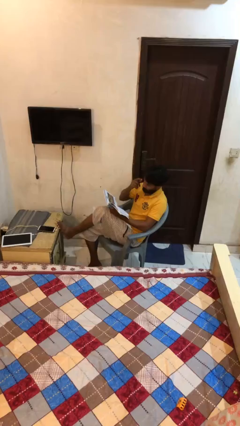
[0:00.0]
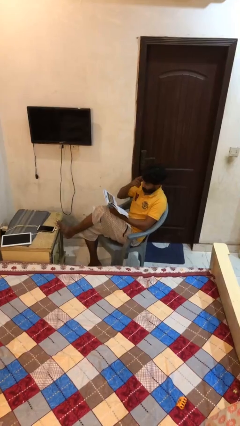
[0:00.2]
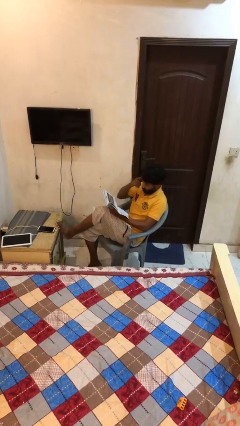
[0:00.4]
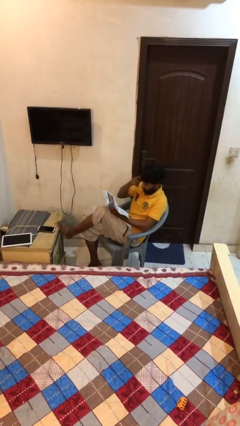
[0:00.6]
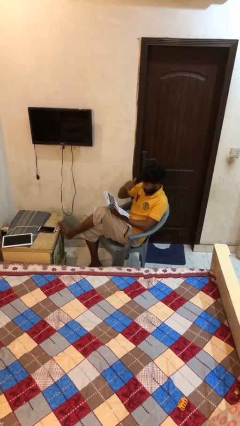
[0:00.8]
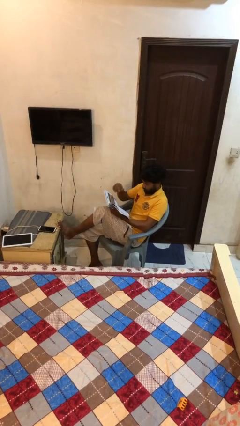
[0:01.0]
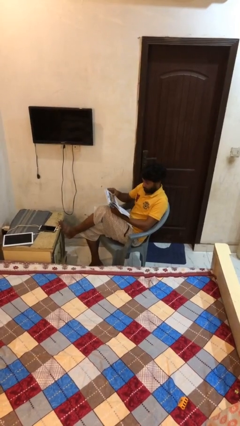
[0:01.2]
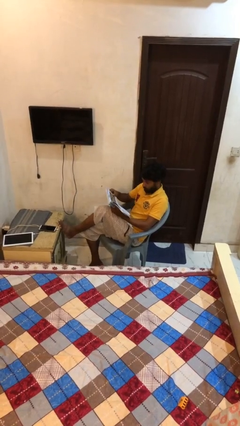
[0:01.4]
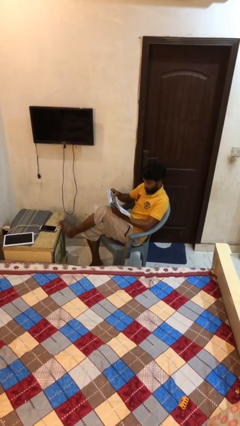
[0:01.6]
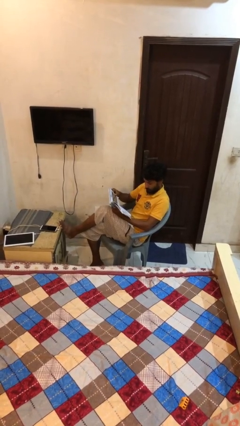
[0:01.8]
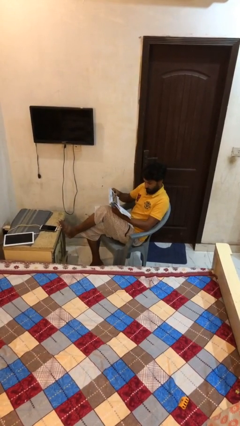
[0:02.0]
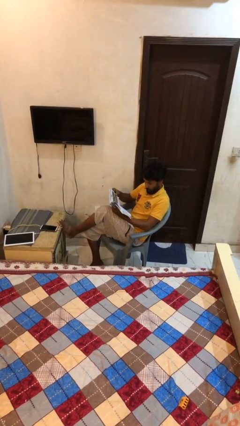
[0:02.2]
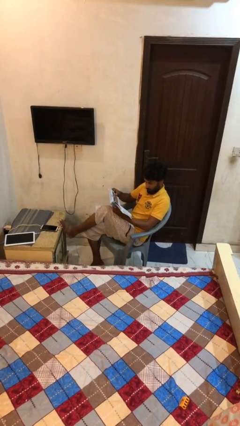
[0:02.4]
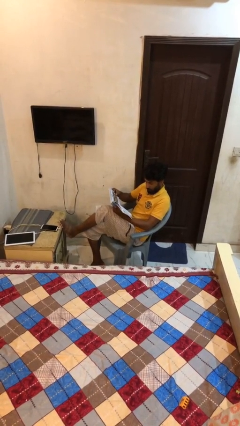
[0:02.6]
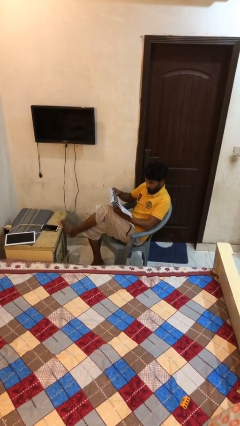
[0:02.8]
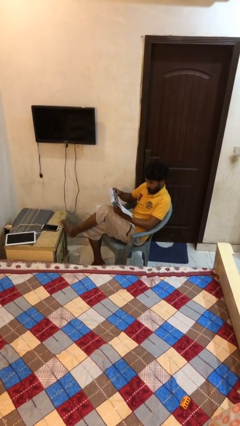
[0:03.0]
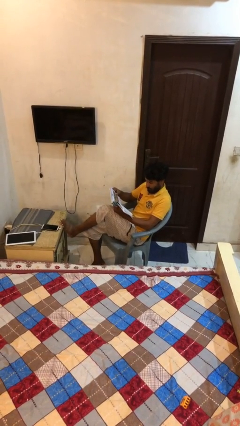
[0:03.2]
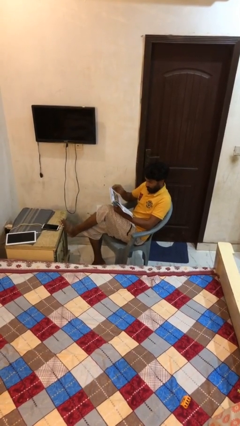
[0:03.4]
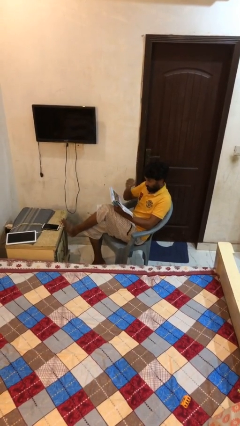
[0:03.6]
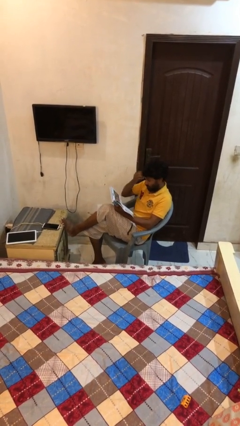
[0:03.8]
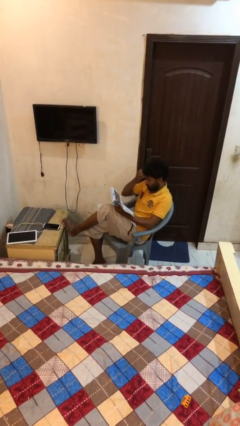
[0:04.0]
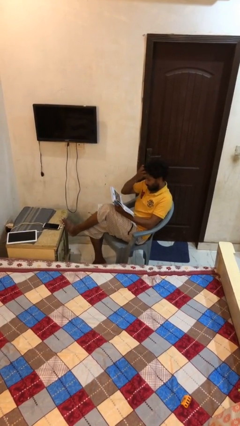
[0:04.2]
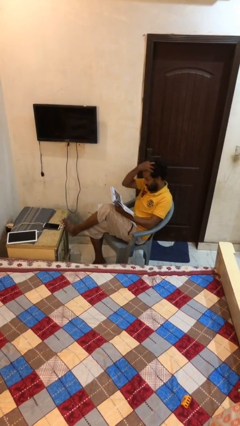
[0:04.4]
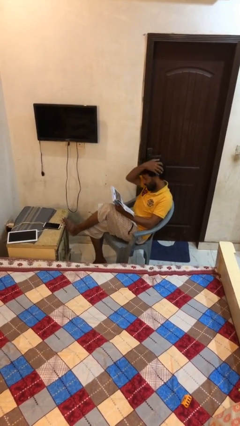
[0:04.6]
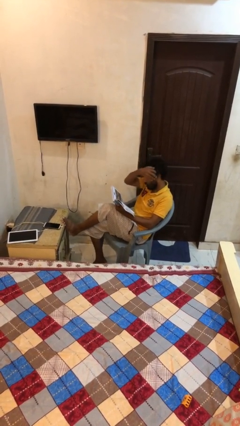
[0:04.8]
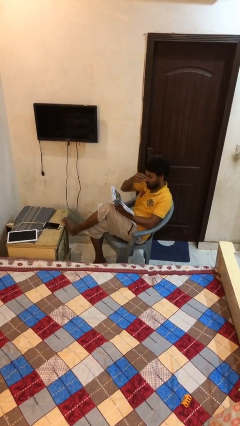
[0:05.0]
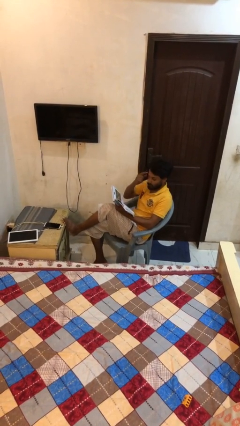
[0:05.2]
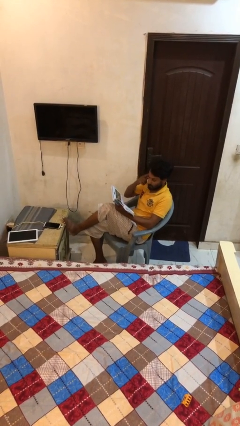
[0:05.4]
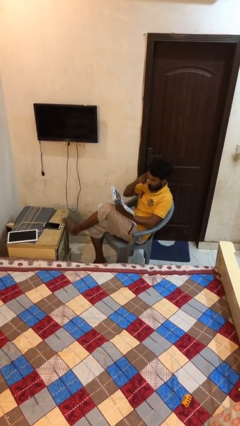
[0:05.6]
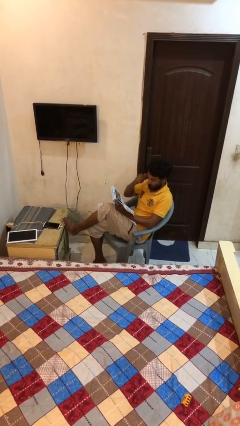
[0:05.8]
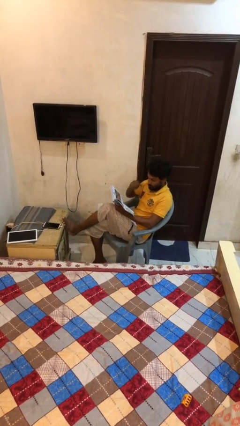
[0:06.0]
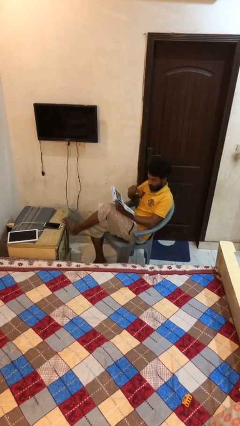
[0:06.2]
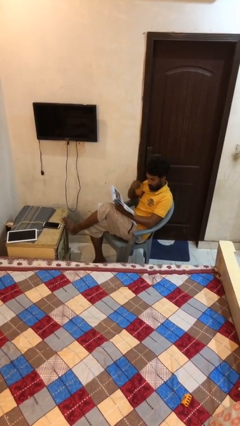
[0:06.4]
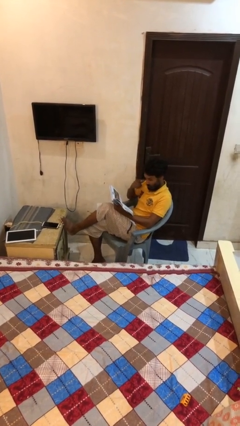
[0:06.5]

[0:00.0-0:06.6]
person reads document

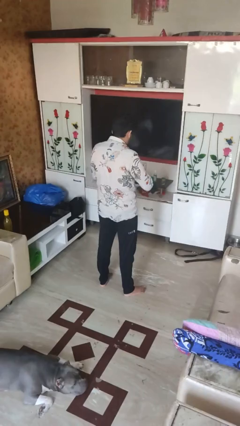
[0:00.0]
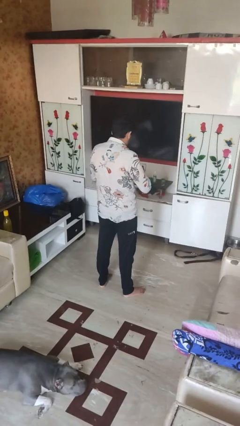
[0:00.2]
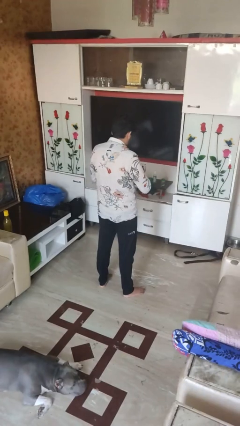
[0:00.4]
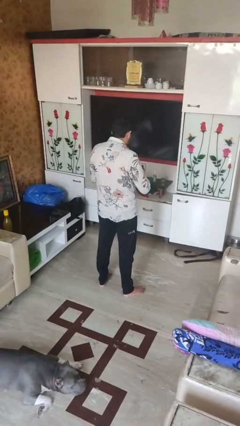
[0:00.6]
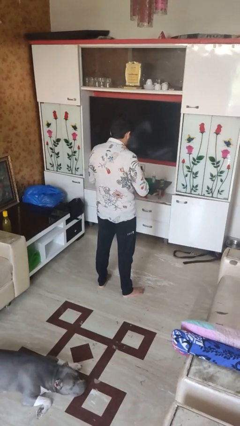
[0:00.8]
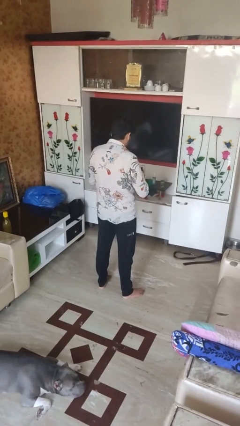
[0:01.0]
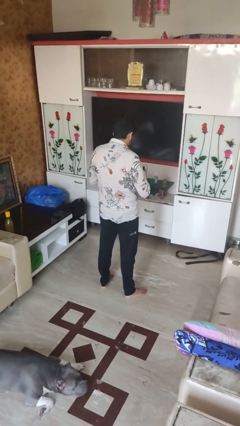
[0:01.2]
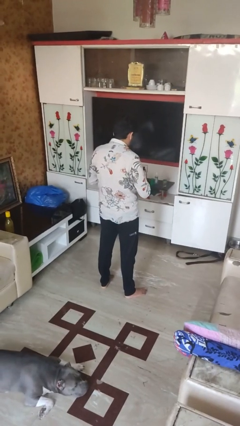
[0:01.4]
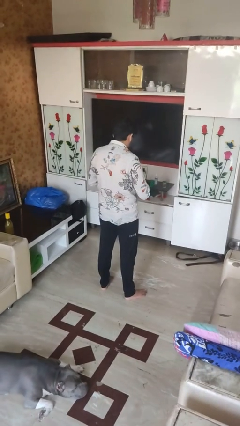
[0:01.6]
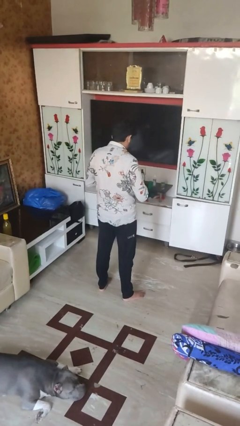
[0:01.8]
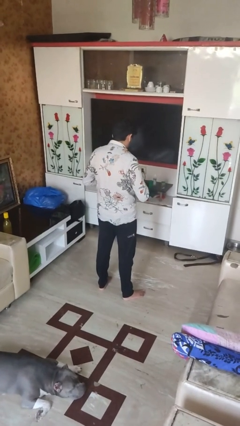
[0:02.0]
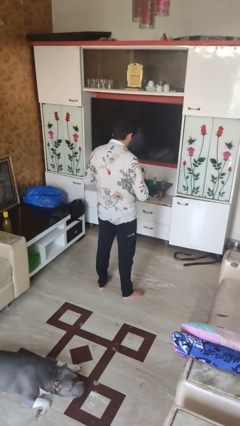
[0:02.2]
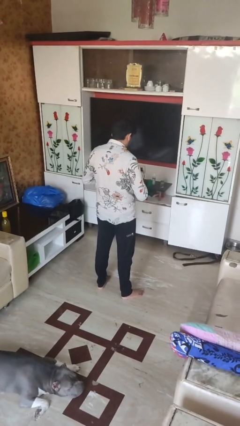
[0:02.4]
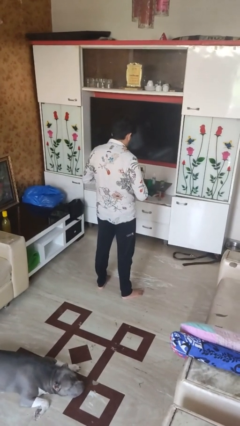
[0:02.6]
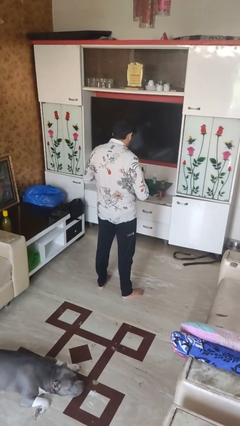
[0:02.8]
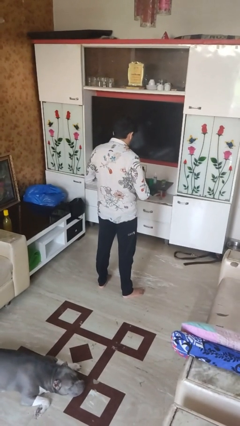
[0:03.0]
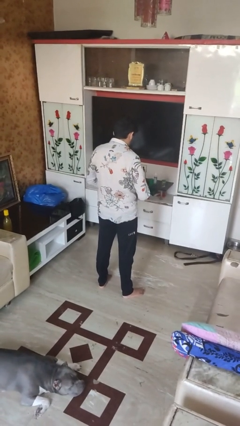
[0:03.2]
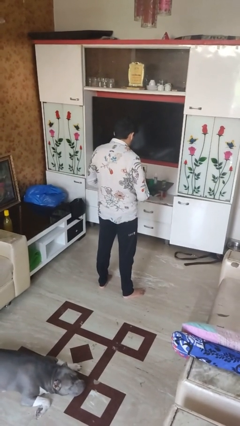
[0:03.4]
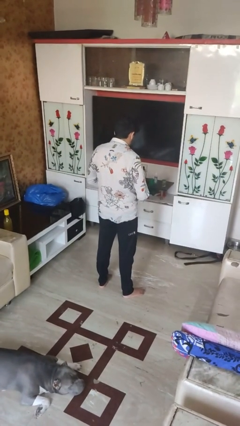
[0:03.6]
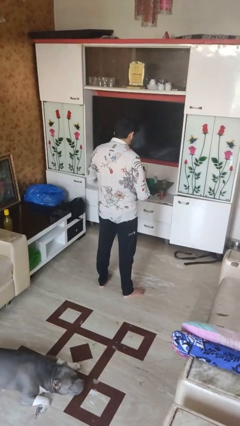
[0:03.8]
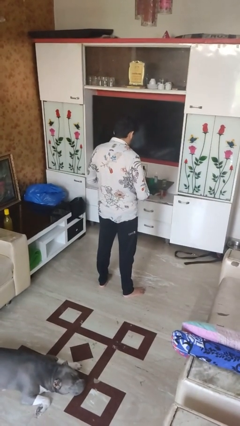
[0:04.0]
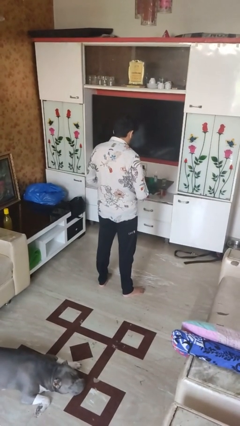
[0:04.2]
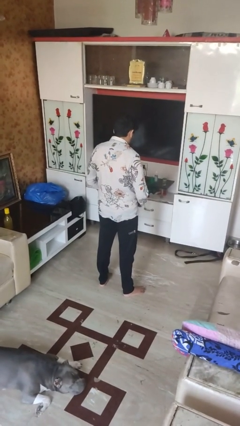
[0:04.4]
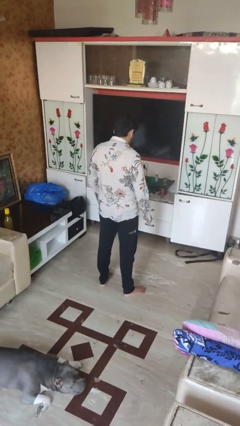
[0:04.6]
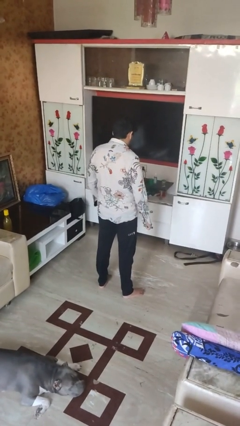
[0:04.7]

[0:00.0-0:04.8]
person unbuttons shirt

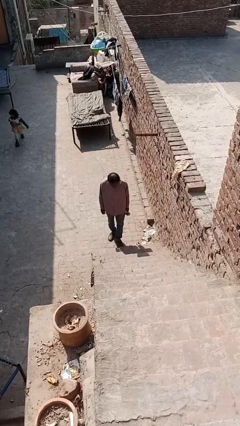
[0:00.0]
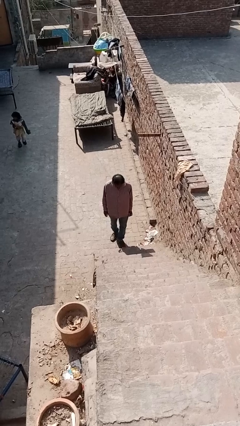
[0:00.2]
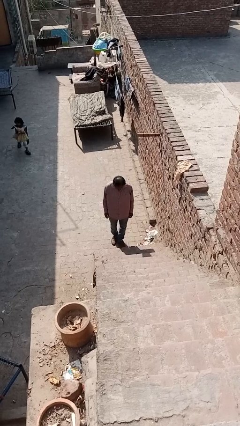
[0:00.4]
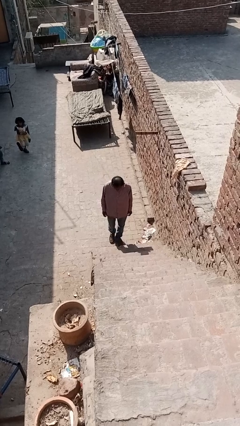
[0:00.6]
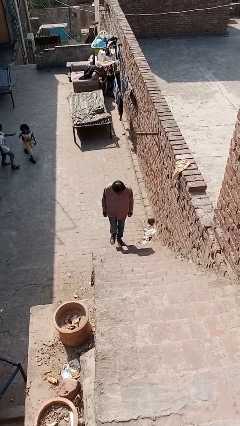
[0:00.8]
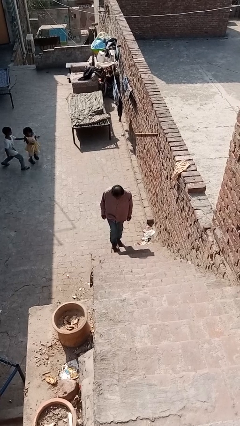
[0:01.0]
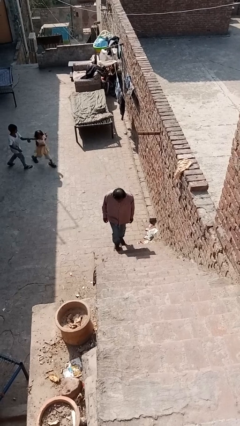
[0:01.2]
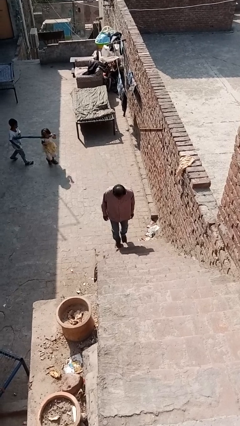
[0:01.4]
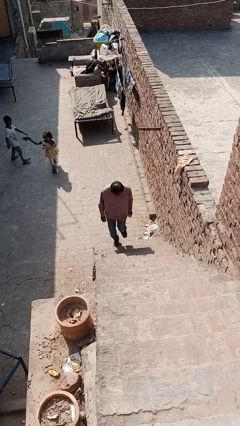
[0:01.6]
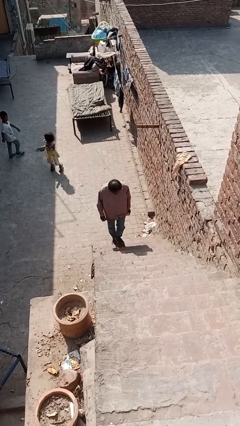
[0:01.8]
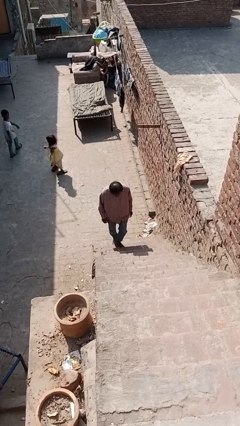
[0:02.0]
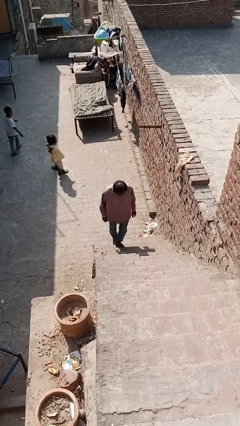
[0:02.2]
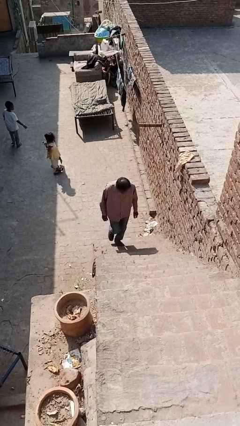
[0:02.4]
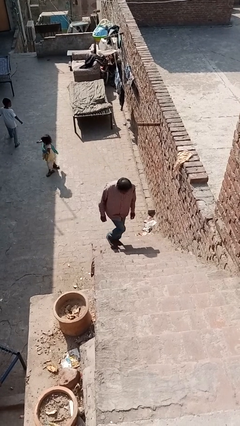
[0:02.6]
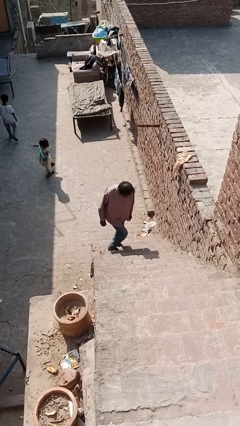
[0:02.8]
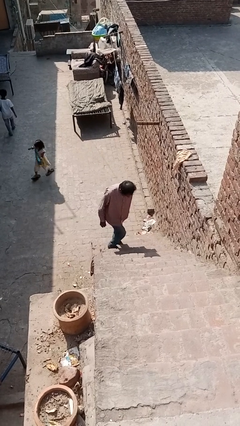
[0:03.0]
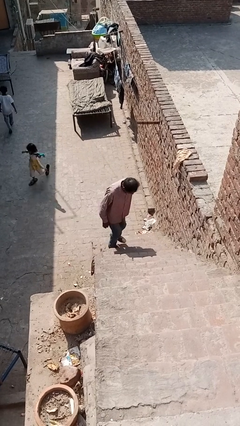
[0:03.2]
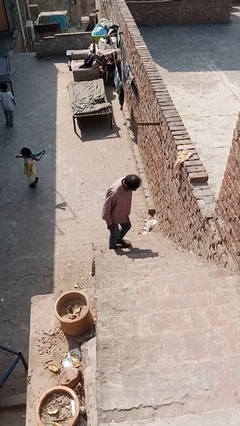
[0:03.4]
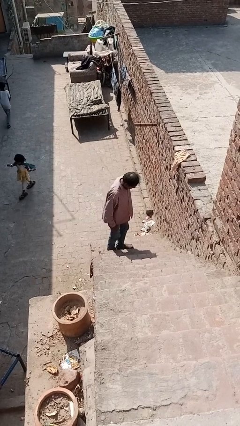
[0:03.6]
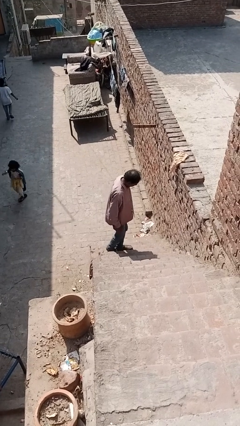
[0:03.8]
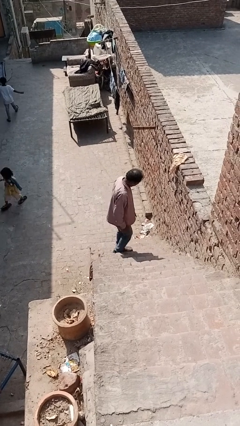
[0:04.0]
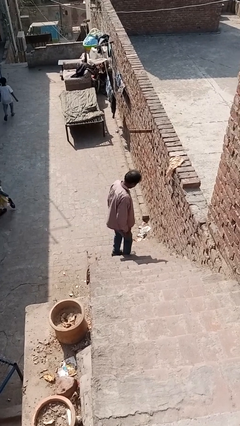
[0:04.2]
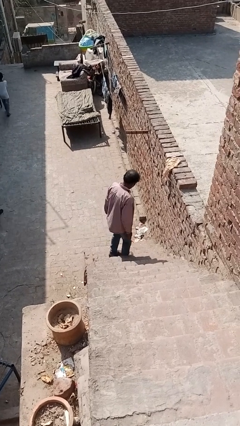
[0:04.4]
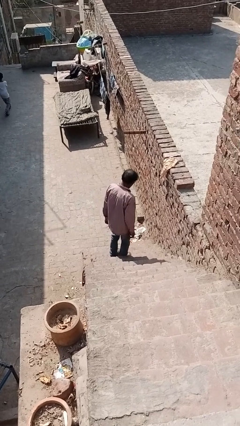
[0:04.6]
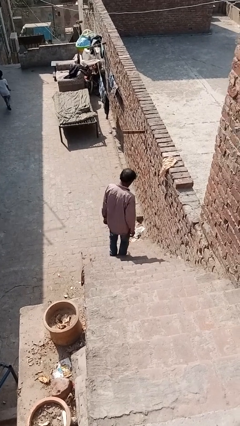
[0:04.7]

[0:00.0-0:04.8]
person climbs up stairs

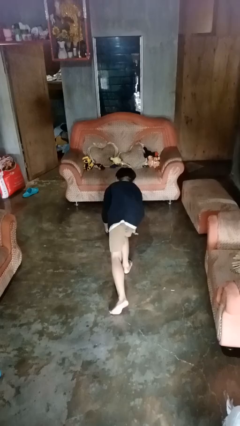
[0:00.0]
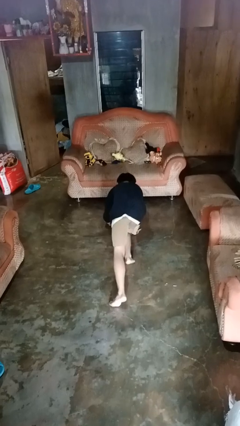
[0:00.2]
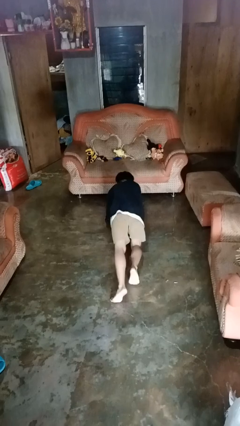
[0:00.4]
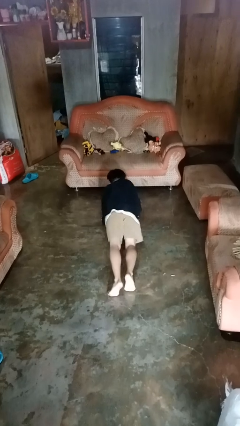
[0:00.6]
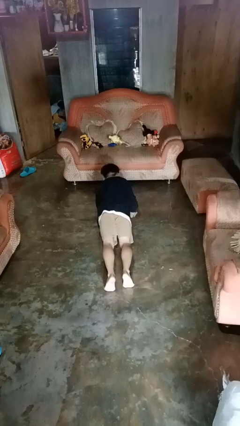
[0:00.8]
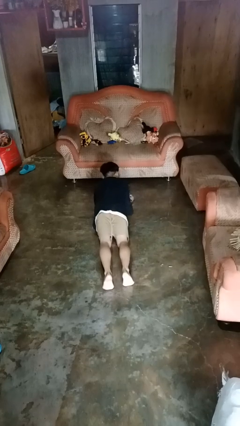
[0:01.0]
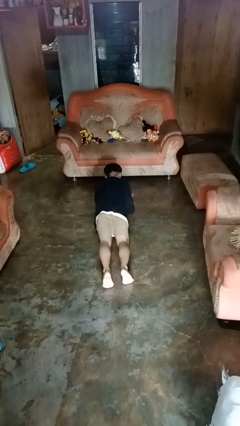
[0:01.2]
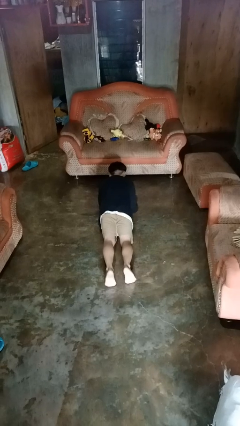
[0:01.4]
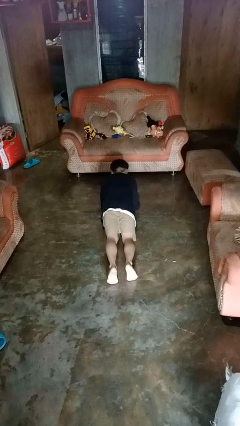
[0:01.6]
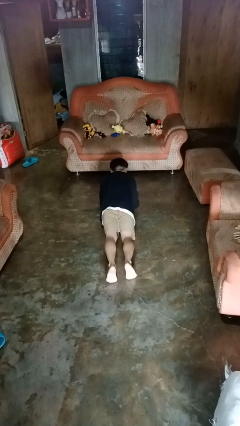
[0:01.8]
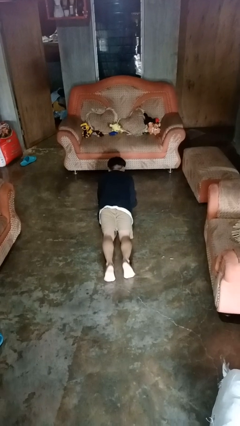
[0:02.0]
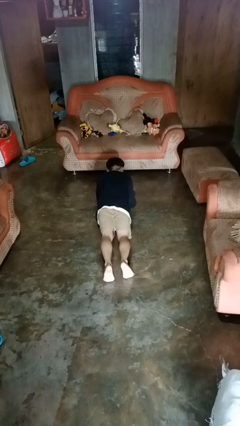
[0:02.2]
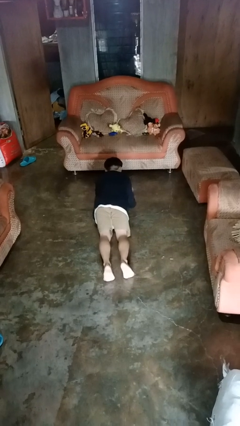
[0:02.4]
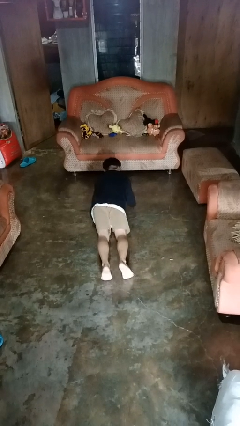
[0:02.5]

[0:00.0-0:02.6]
person exercises with plank
